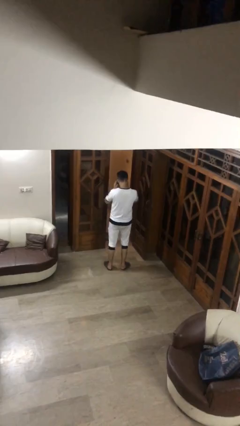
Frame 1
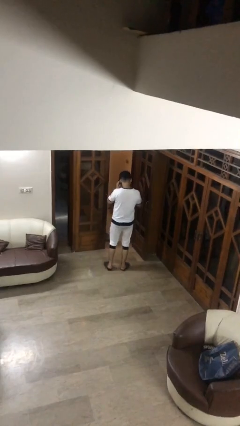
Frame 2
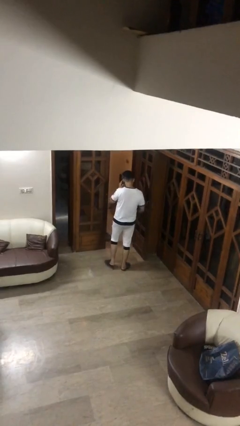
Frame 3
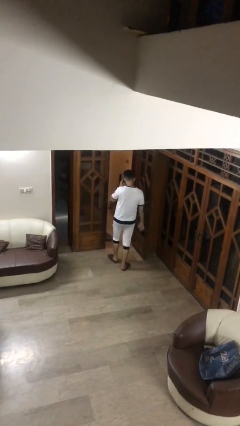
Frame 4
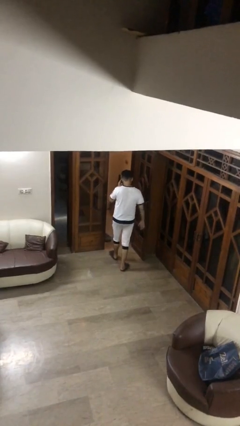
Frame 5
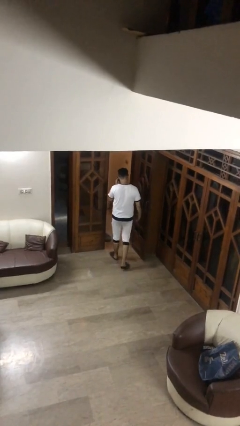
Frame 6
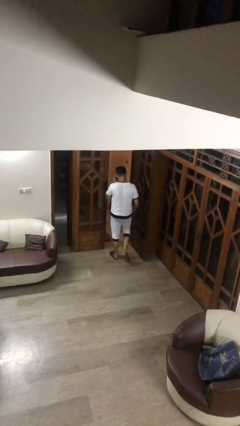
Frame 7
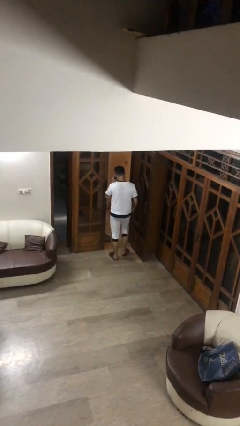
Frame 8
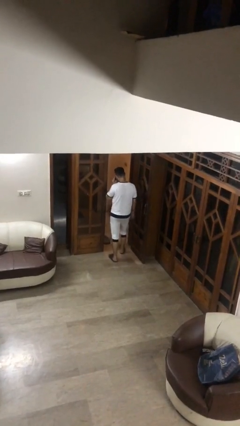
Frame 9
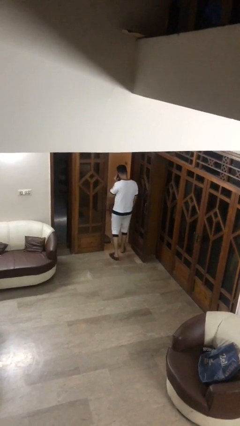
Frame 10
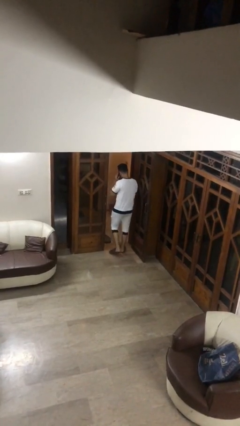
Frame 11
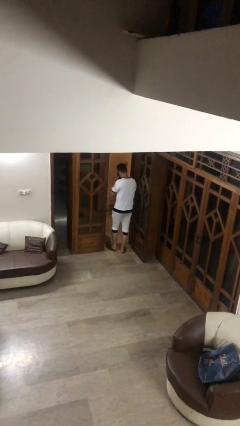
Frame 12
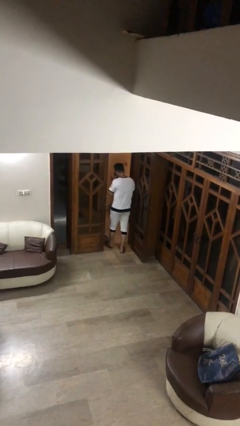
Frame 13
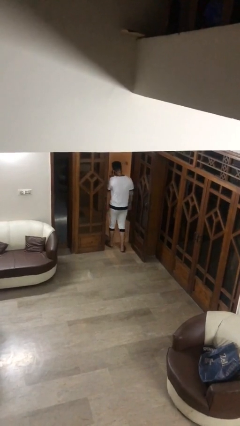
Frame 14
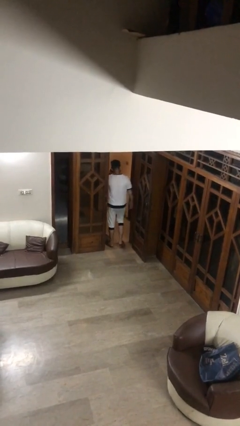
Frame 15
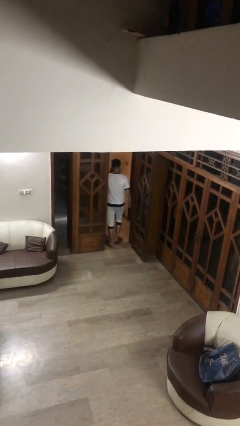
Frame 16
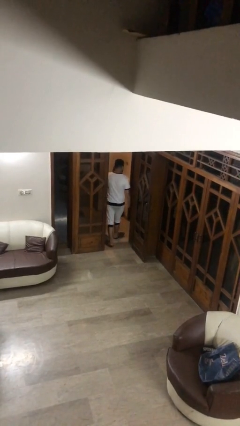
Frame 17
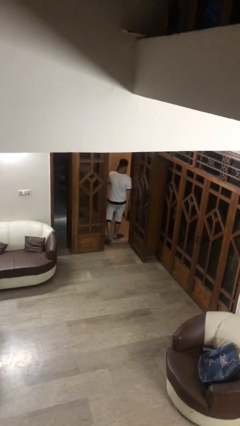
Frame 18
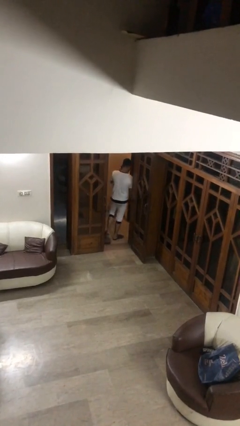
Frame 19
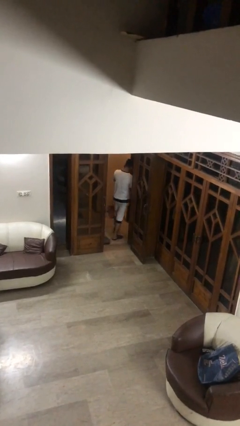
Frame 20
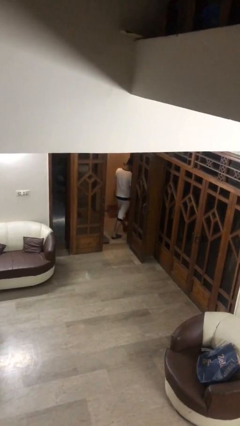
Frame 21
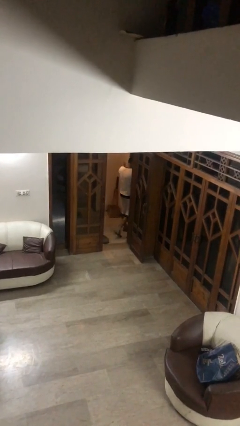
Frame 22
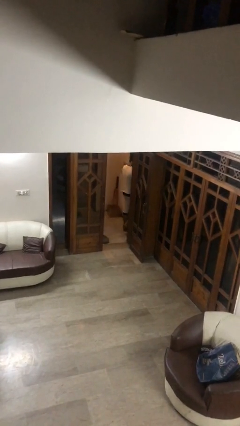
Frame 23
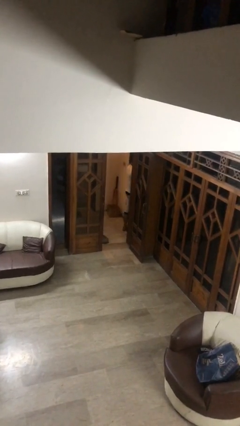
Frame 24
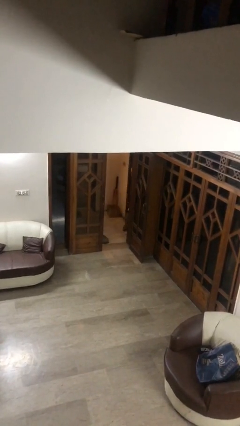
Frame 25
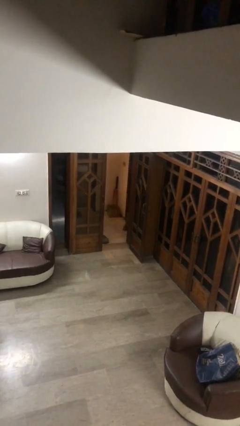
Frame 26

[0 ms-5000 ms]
person exits scene through structure

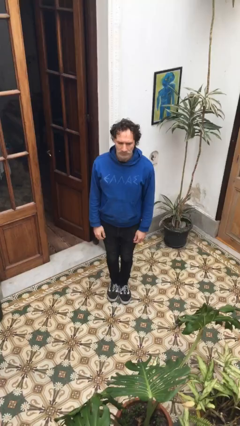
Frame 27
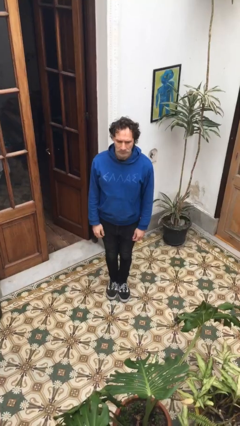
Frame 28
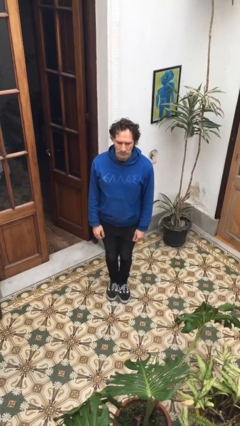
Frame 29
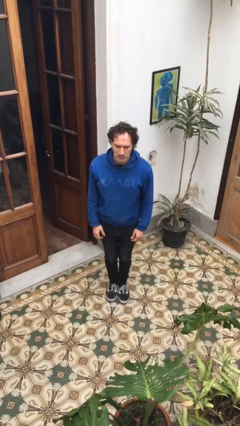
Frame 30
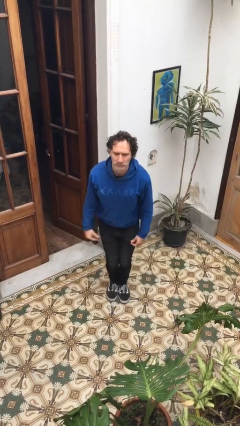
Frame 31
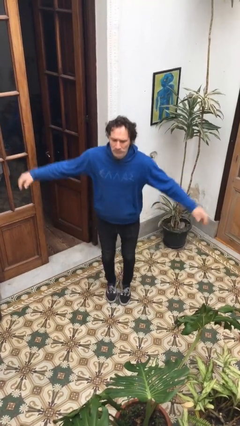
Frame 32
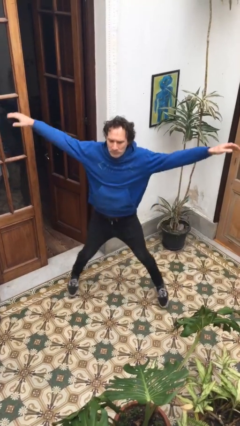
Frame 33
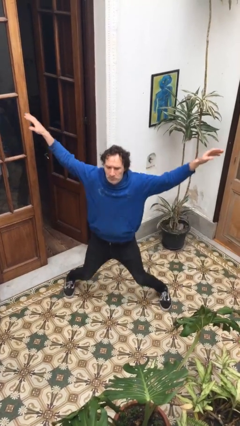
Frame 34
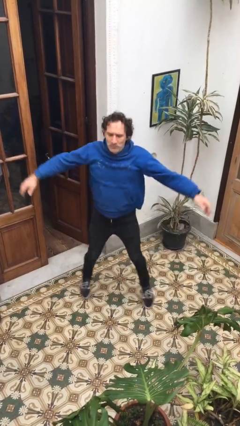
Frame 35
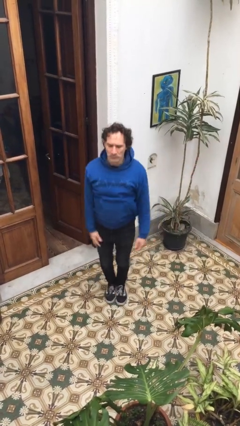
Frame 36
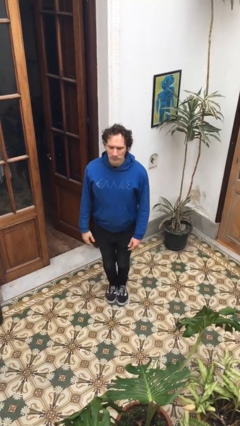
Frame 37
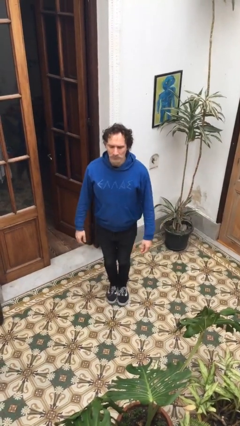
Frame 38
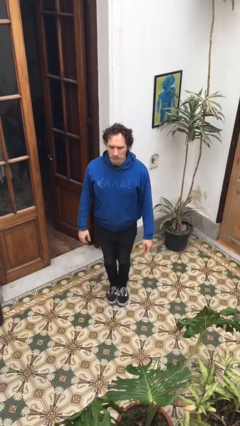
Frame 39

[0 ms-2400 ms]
person exercises with jumping jacks

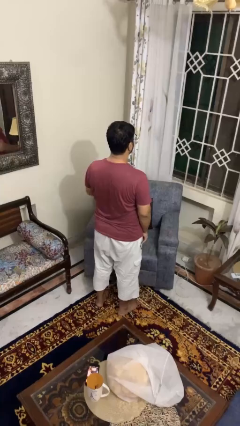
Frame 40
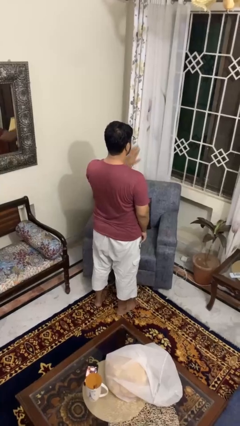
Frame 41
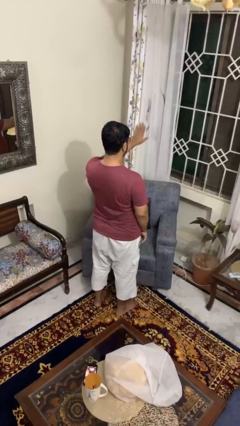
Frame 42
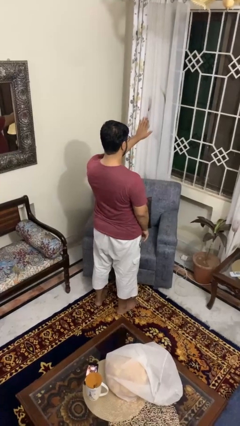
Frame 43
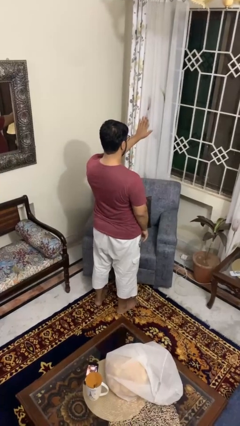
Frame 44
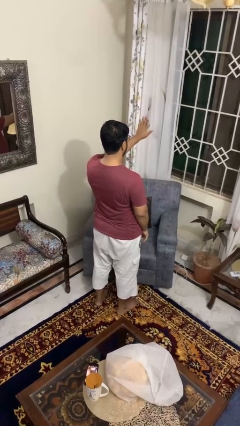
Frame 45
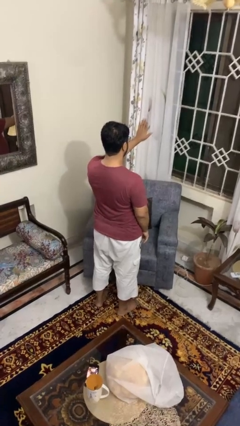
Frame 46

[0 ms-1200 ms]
person gestures stop

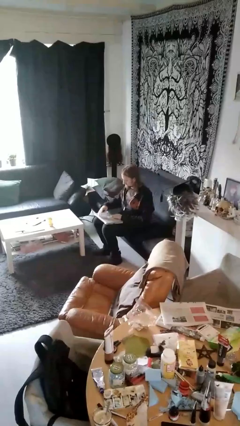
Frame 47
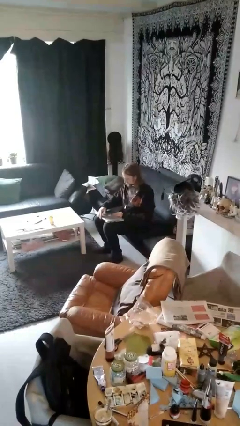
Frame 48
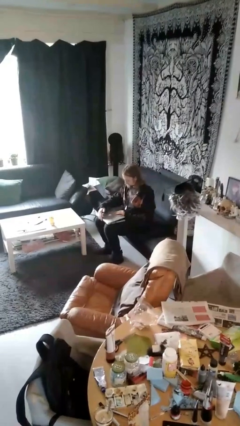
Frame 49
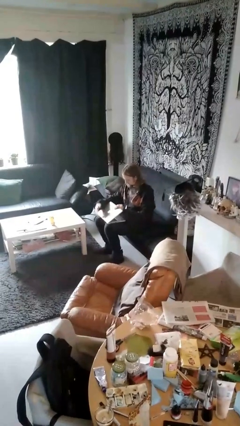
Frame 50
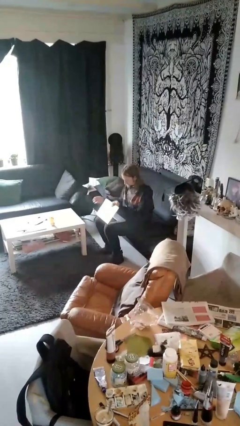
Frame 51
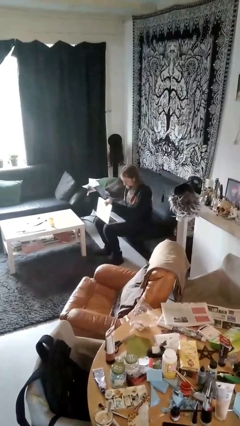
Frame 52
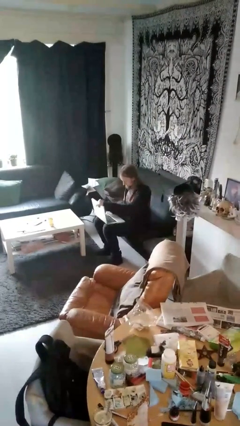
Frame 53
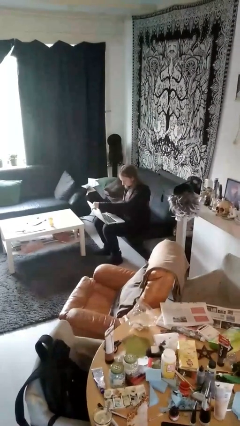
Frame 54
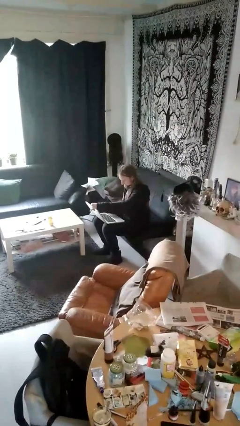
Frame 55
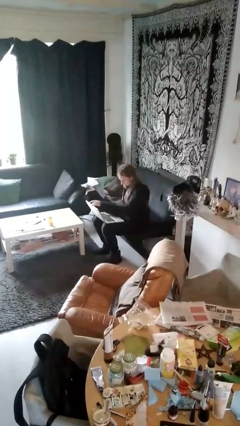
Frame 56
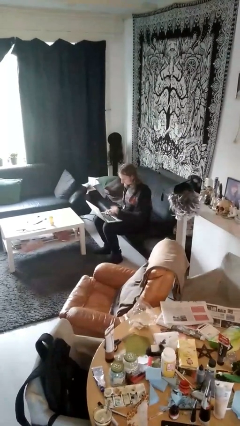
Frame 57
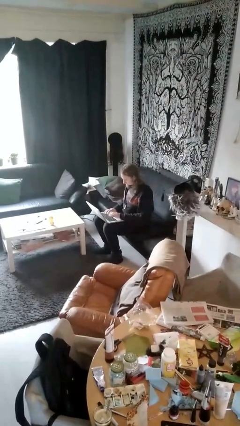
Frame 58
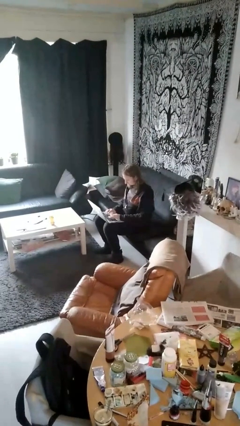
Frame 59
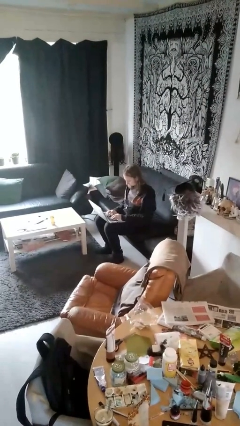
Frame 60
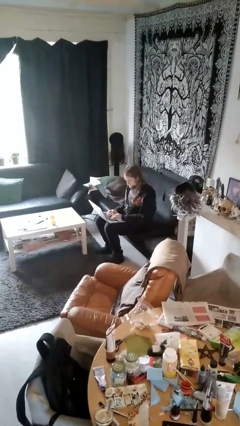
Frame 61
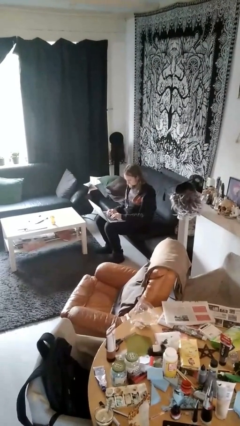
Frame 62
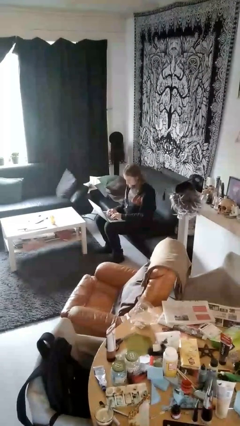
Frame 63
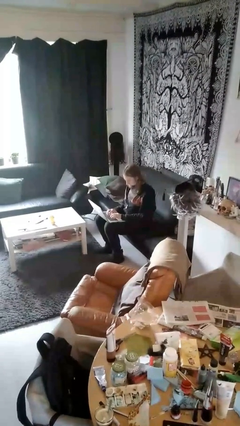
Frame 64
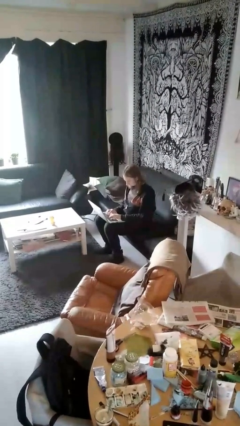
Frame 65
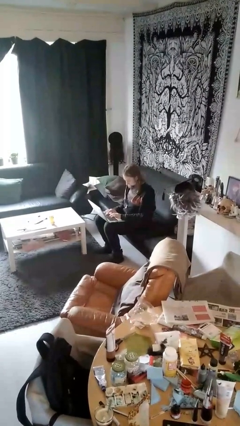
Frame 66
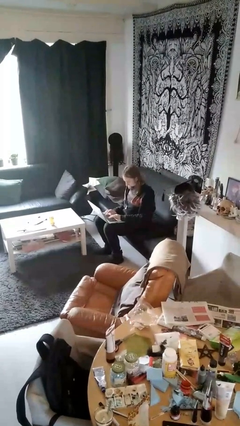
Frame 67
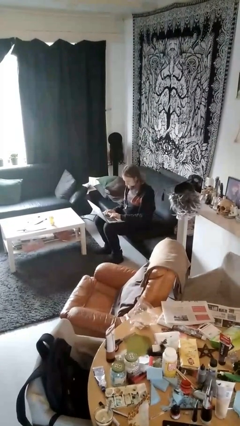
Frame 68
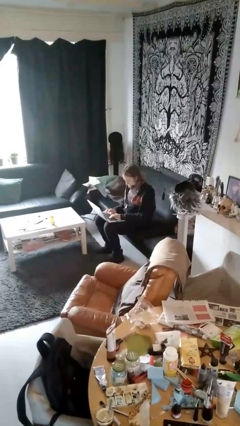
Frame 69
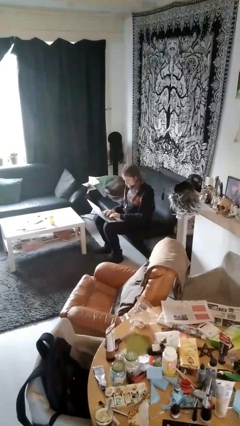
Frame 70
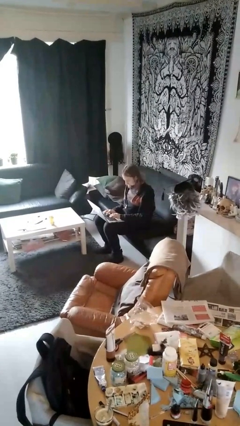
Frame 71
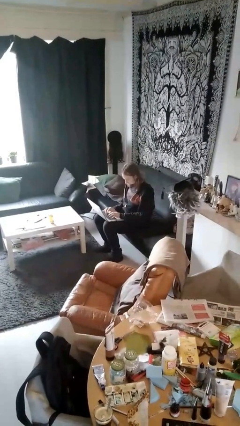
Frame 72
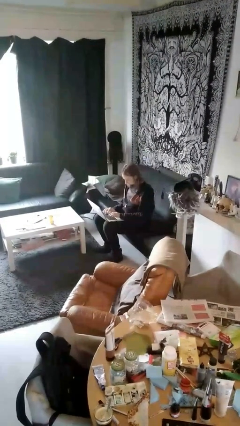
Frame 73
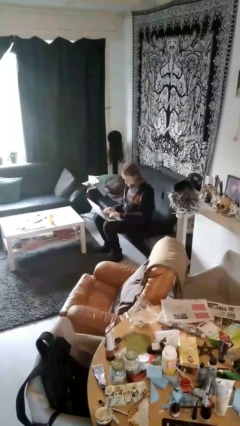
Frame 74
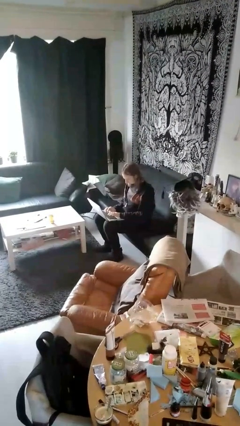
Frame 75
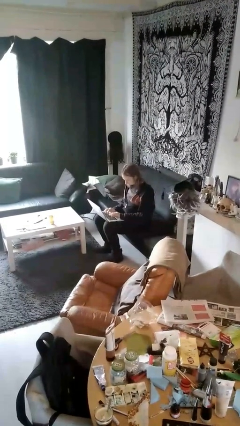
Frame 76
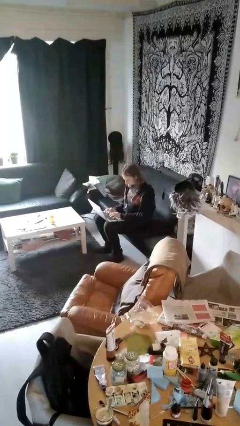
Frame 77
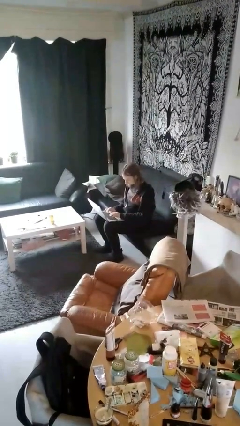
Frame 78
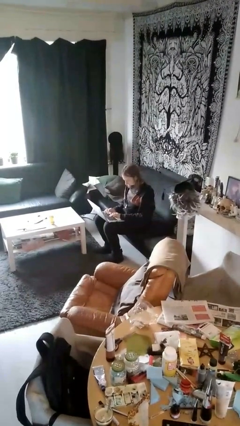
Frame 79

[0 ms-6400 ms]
person interacts with laptop

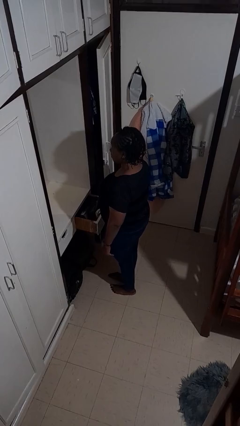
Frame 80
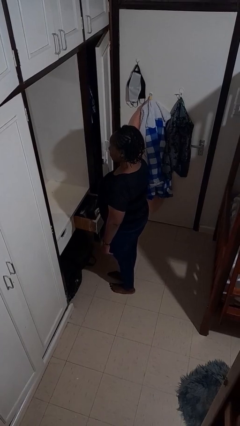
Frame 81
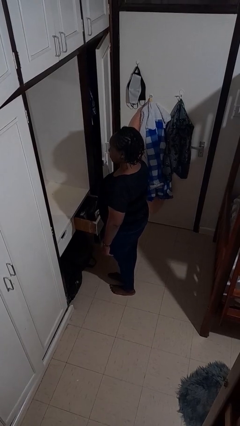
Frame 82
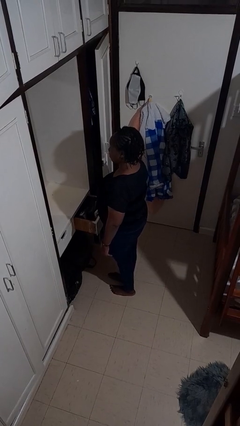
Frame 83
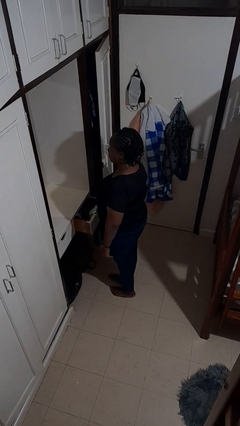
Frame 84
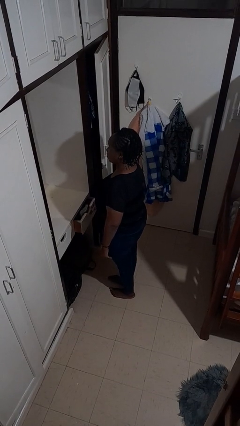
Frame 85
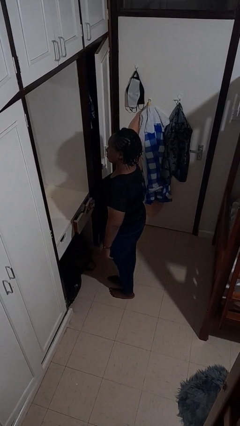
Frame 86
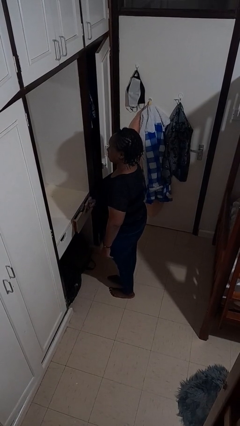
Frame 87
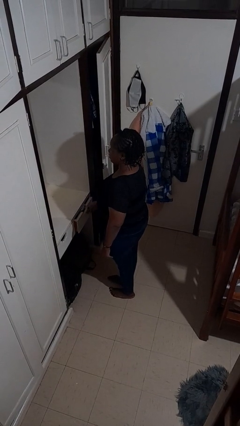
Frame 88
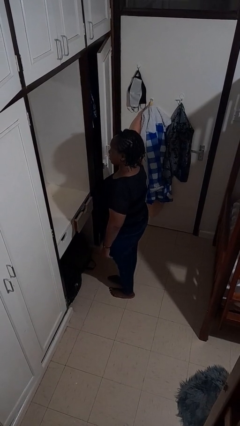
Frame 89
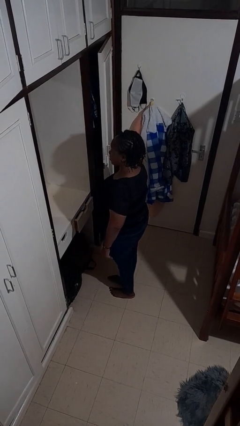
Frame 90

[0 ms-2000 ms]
person closes dresser drawer

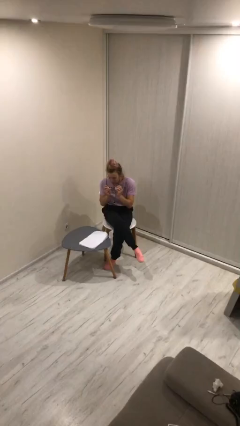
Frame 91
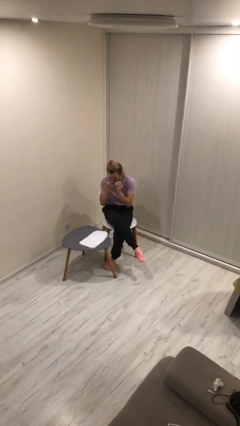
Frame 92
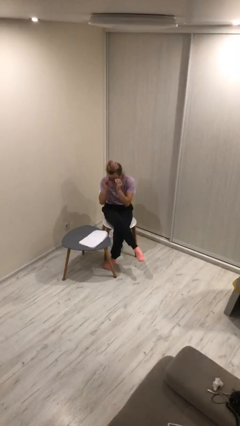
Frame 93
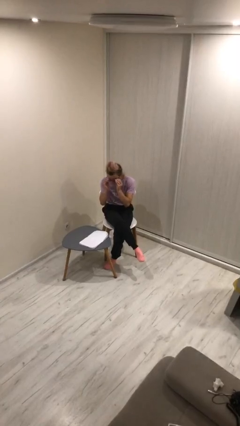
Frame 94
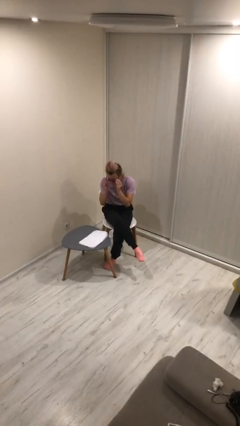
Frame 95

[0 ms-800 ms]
person puts on glasses
